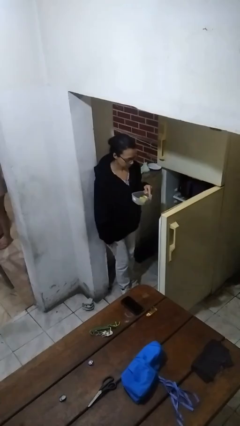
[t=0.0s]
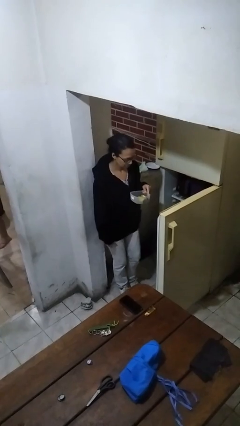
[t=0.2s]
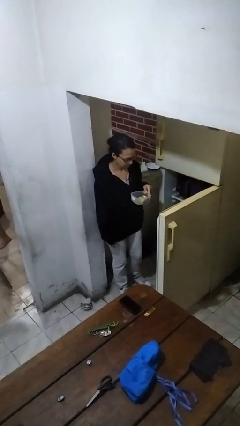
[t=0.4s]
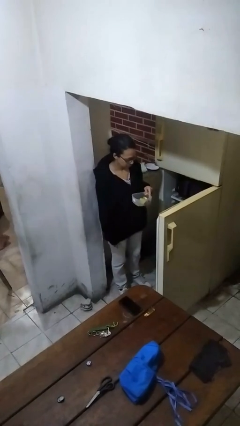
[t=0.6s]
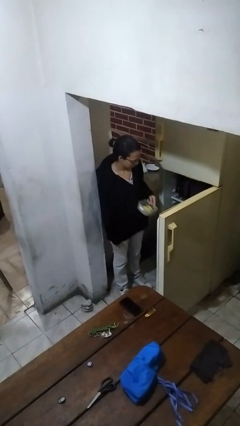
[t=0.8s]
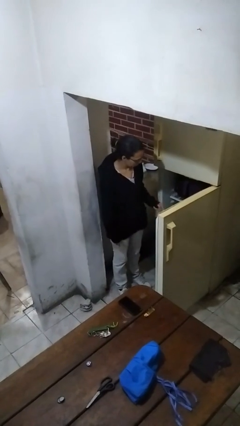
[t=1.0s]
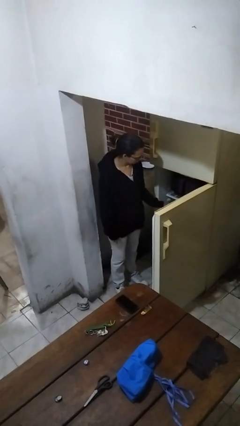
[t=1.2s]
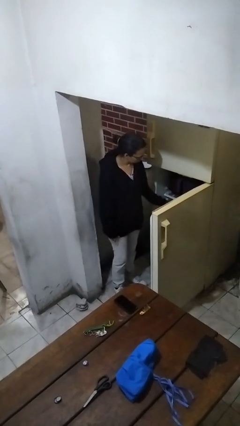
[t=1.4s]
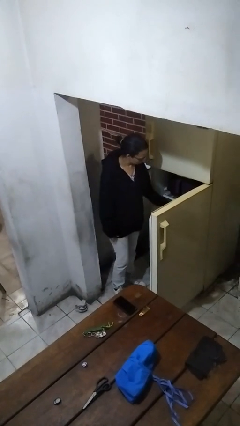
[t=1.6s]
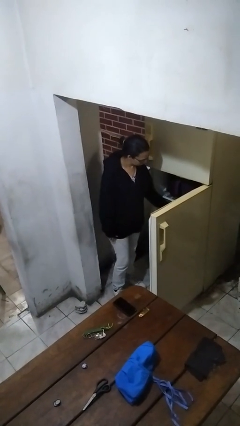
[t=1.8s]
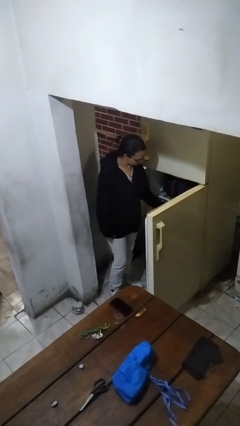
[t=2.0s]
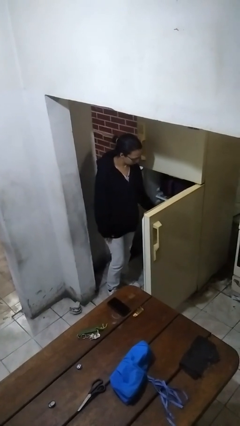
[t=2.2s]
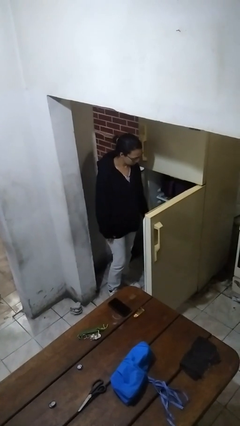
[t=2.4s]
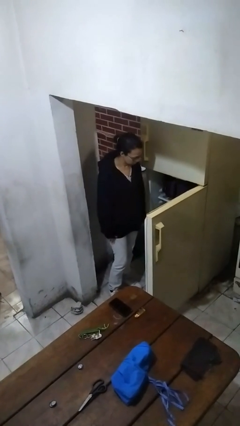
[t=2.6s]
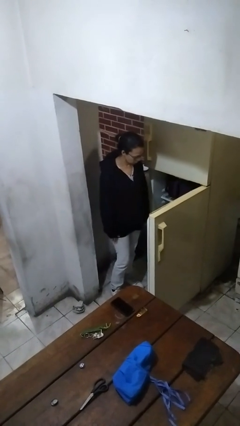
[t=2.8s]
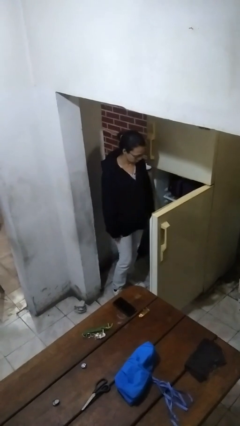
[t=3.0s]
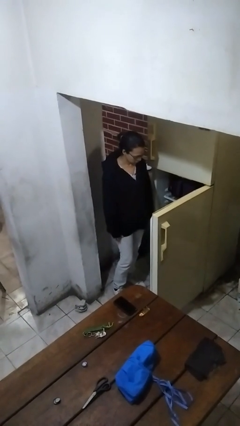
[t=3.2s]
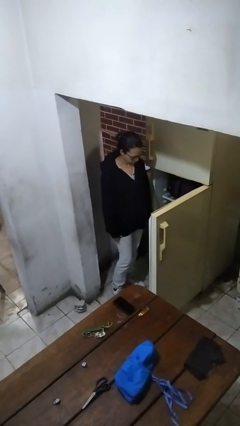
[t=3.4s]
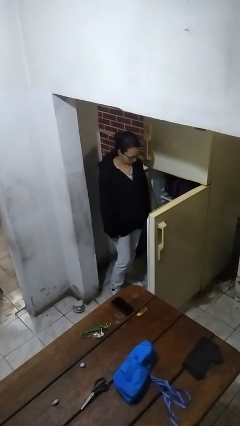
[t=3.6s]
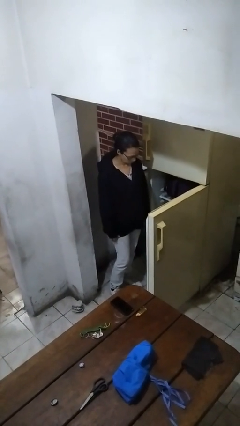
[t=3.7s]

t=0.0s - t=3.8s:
person puts object into refrigerator

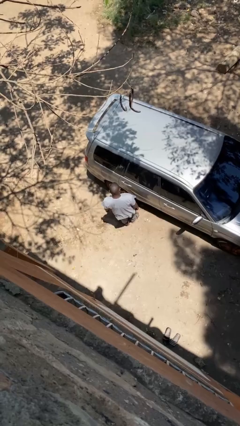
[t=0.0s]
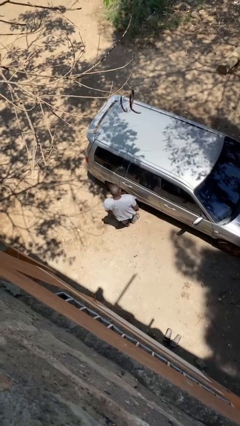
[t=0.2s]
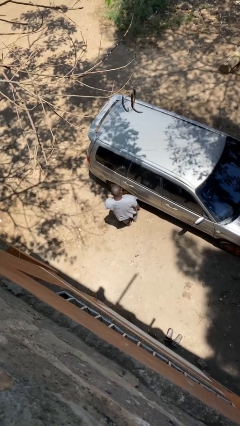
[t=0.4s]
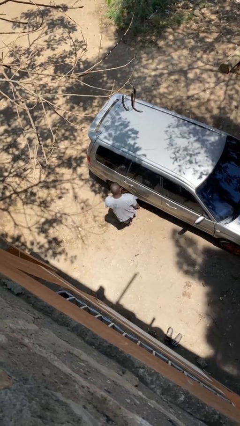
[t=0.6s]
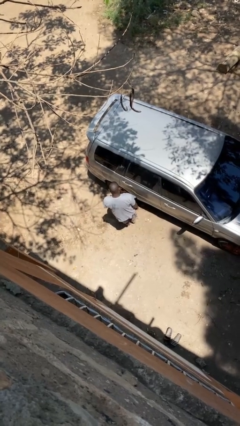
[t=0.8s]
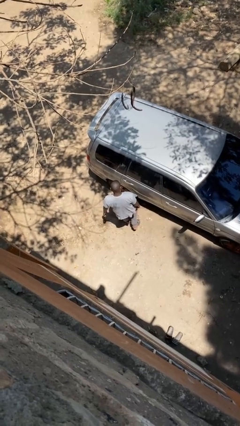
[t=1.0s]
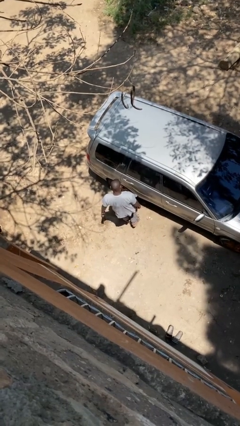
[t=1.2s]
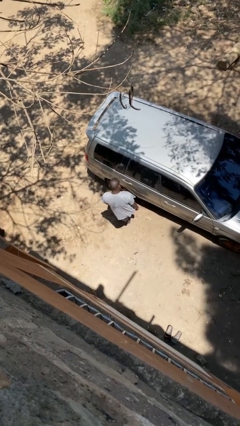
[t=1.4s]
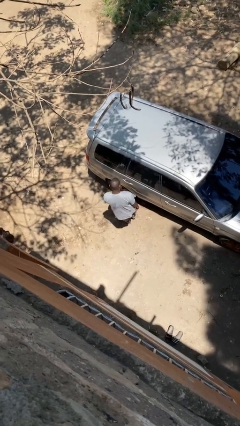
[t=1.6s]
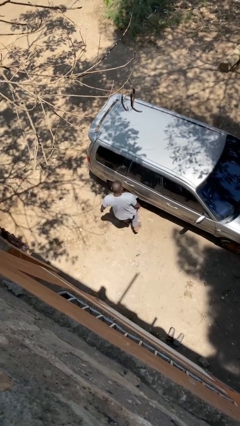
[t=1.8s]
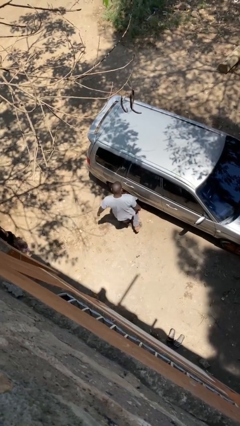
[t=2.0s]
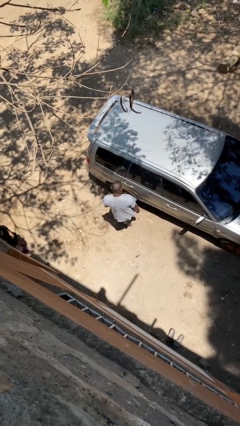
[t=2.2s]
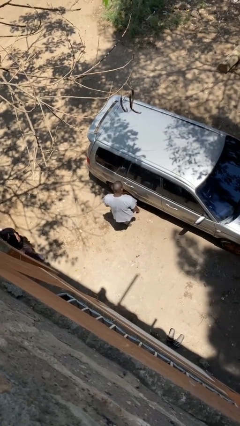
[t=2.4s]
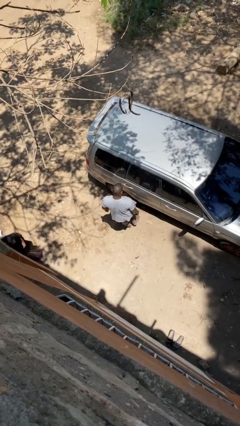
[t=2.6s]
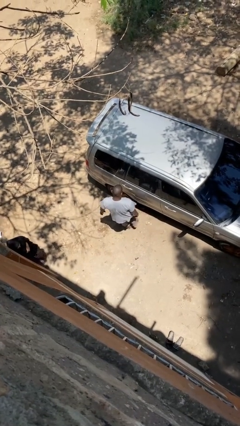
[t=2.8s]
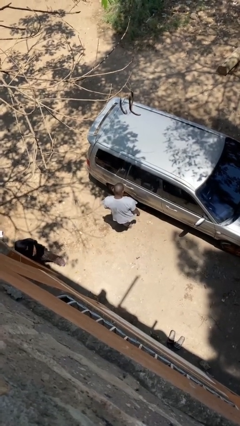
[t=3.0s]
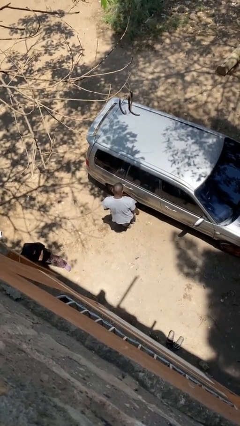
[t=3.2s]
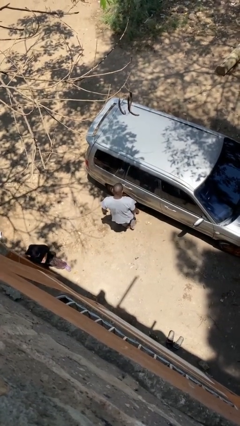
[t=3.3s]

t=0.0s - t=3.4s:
person kicks car tires

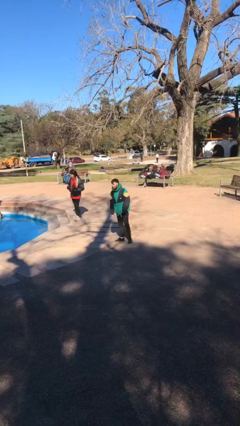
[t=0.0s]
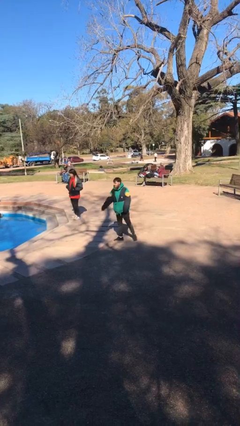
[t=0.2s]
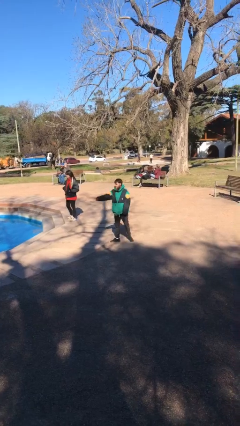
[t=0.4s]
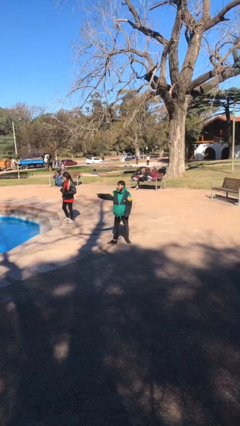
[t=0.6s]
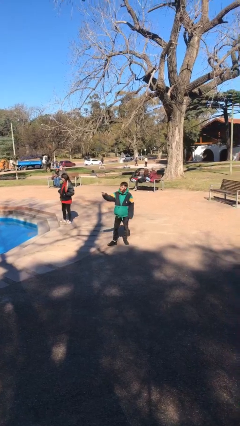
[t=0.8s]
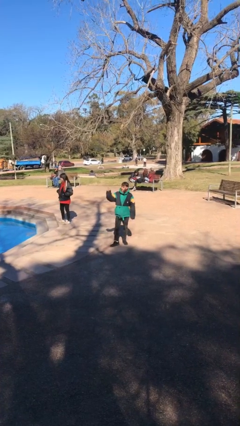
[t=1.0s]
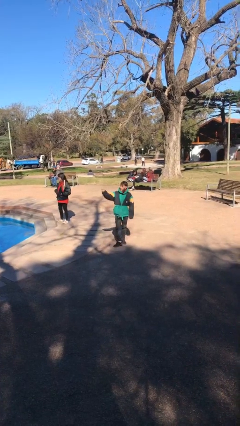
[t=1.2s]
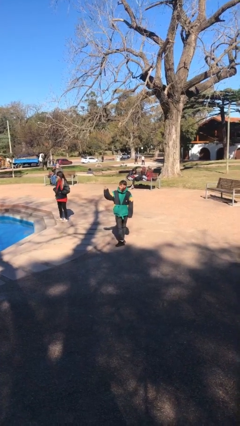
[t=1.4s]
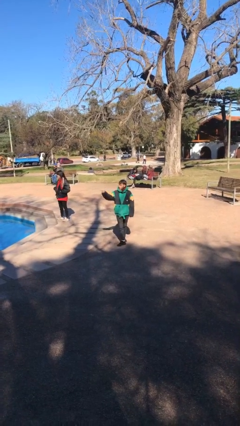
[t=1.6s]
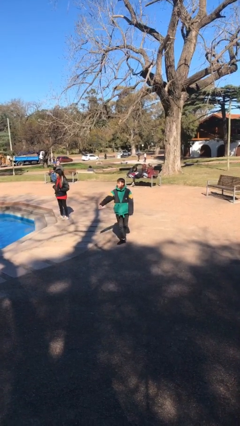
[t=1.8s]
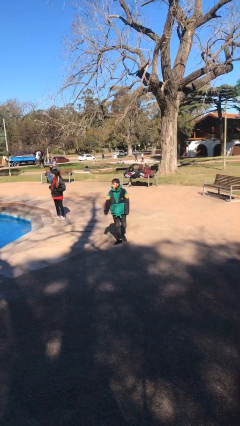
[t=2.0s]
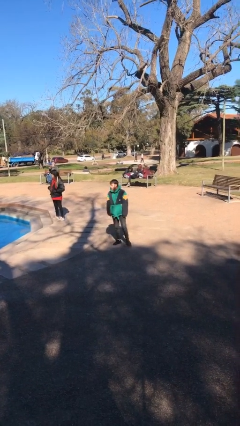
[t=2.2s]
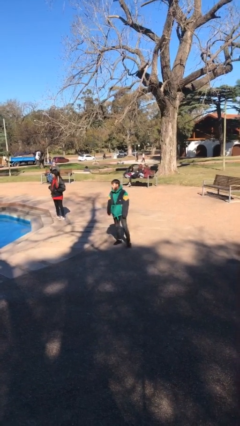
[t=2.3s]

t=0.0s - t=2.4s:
person points at person

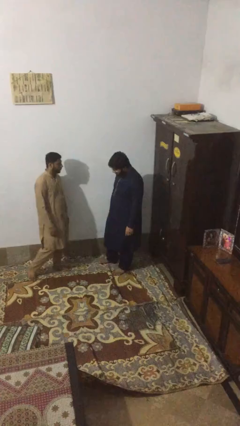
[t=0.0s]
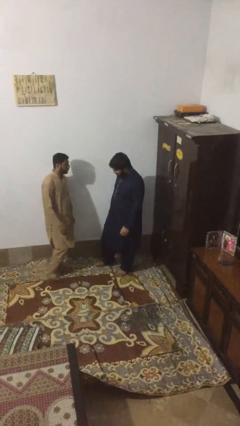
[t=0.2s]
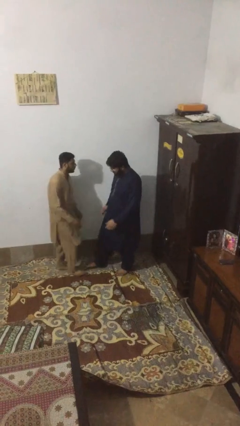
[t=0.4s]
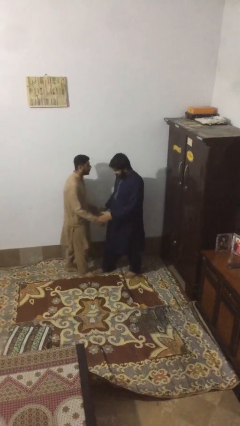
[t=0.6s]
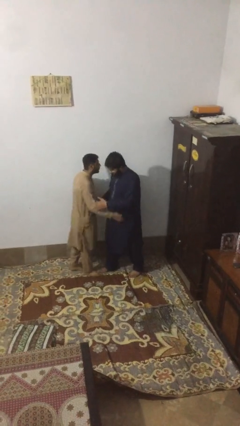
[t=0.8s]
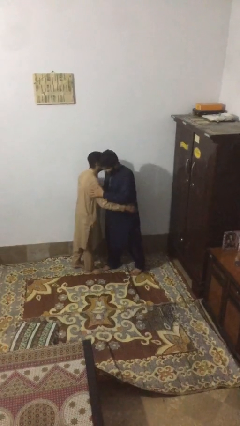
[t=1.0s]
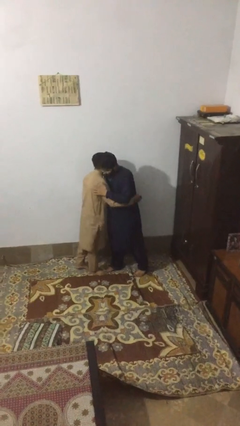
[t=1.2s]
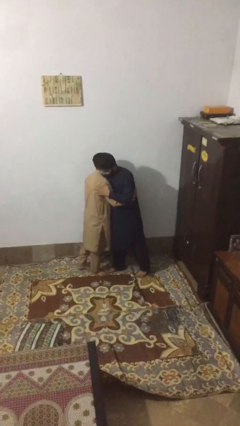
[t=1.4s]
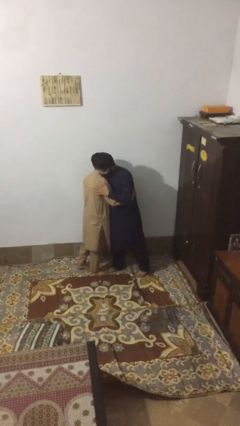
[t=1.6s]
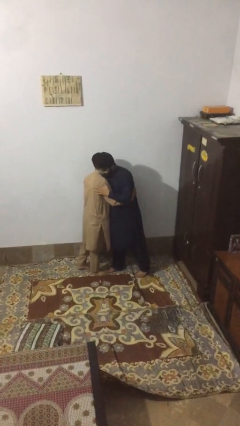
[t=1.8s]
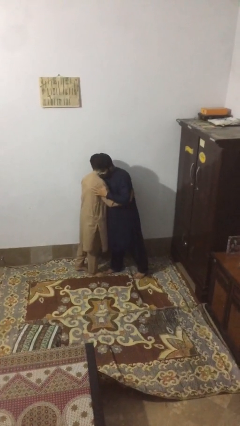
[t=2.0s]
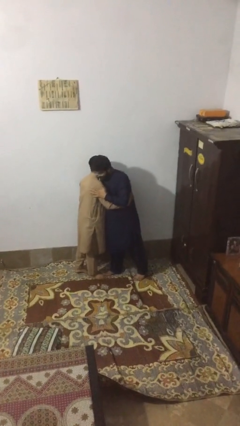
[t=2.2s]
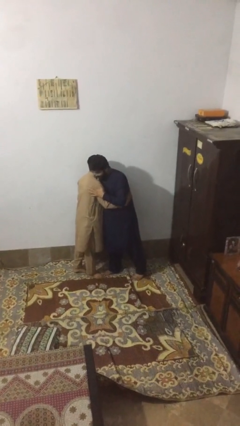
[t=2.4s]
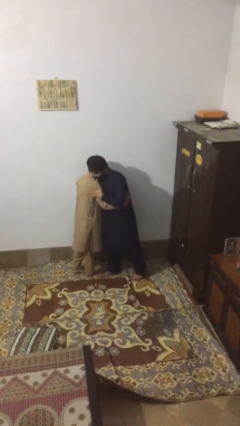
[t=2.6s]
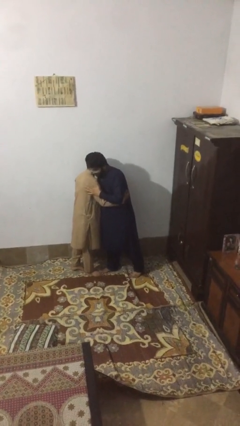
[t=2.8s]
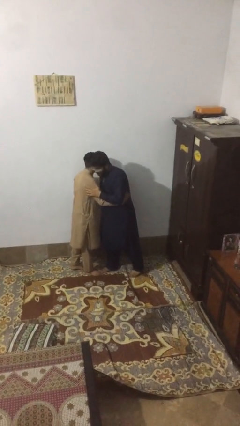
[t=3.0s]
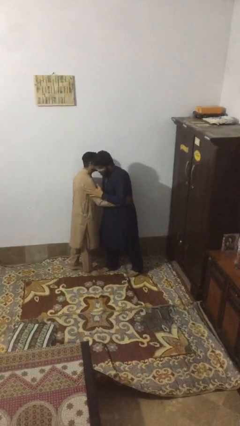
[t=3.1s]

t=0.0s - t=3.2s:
person embraces person

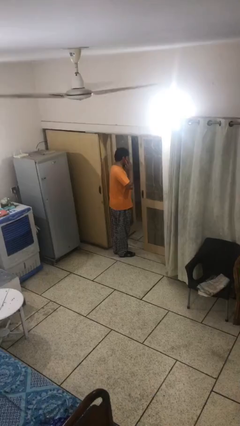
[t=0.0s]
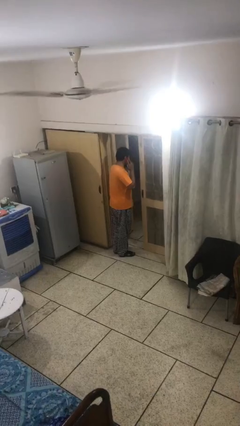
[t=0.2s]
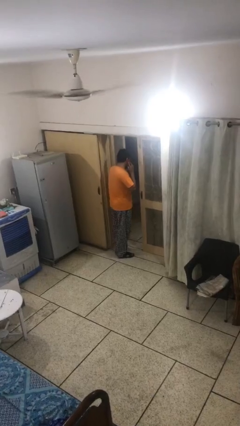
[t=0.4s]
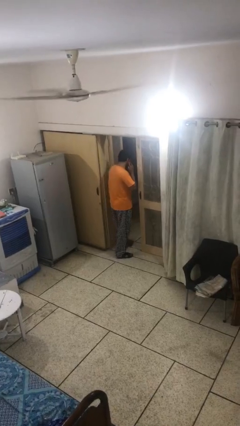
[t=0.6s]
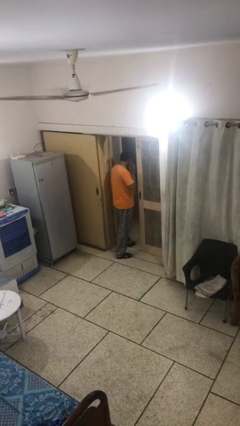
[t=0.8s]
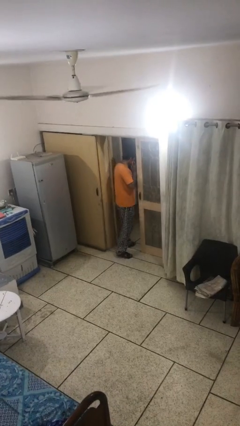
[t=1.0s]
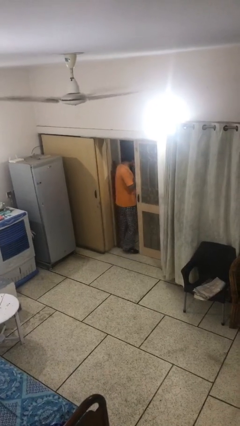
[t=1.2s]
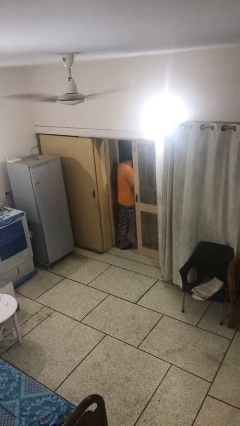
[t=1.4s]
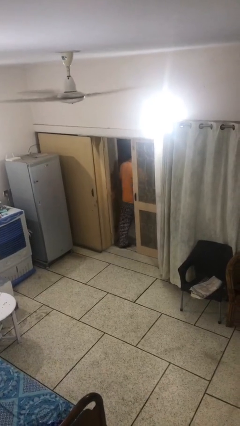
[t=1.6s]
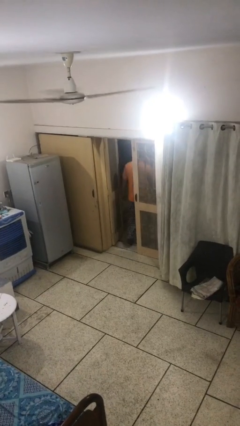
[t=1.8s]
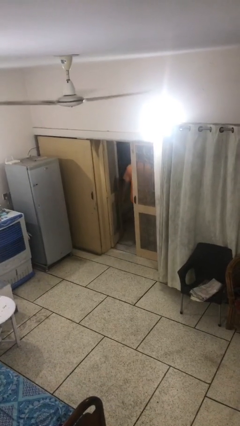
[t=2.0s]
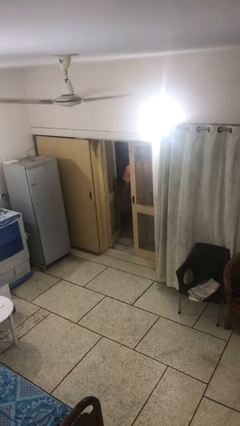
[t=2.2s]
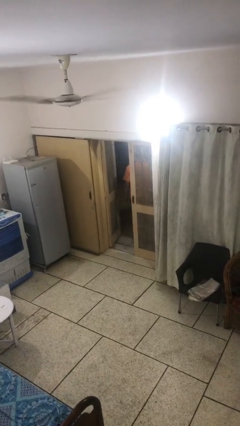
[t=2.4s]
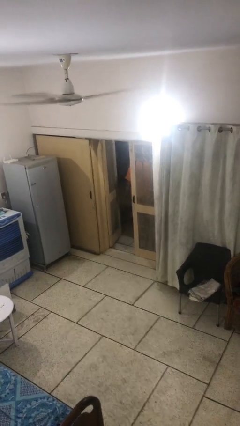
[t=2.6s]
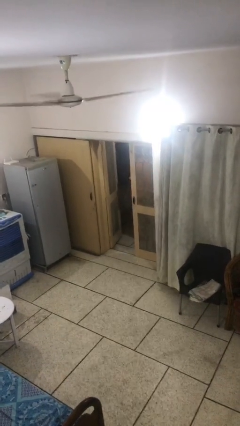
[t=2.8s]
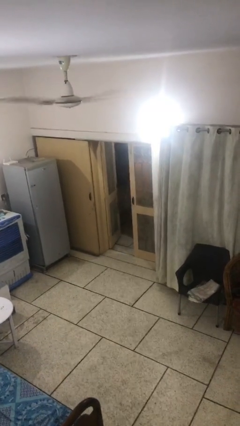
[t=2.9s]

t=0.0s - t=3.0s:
person exits scene through structure

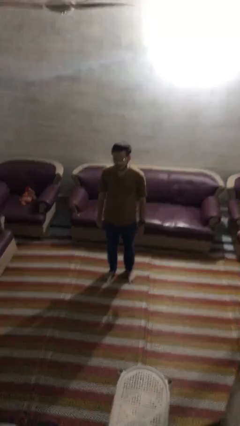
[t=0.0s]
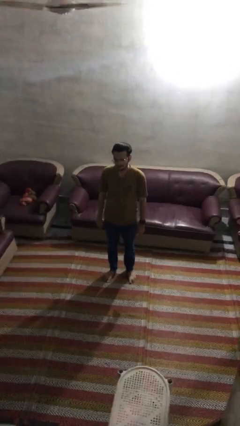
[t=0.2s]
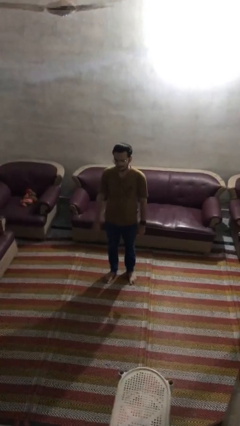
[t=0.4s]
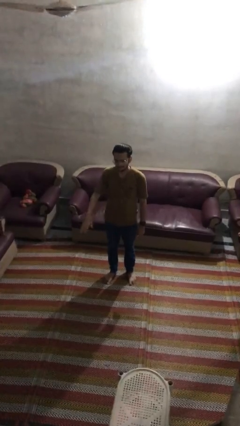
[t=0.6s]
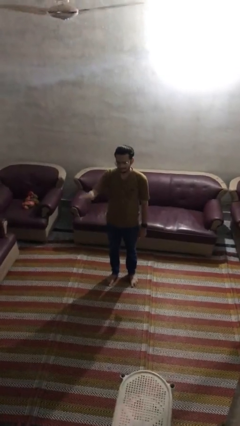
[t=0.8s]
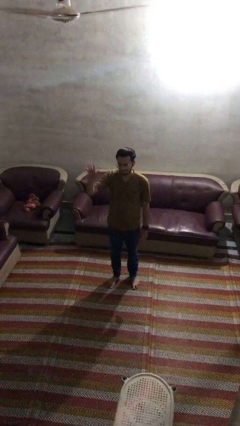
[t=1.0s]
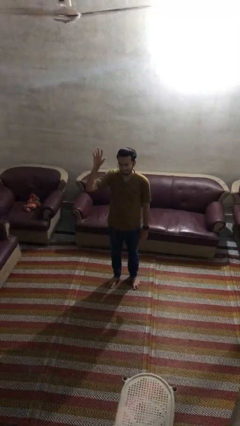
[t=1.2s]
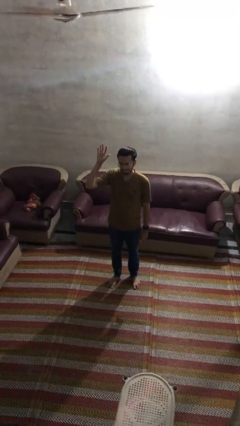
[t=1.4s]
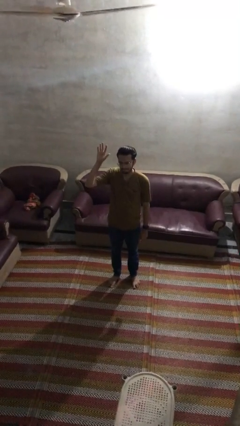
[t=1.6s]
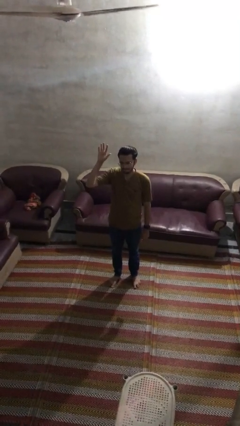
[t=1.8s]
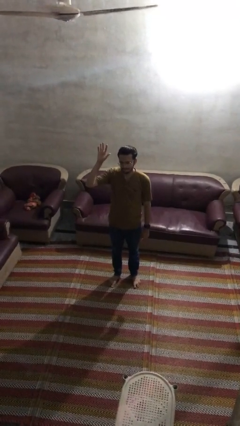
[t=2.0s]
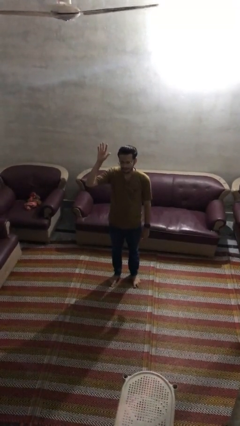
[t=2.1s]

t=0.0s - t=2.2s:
person gestures raise hand
